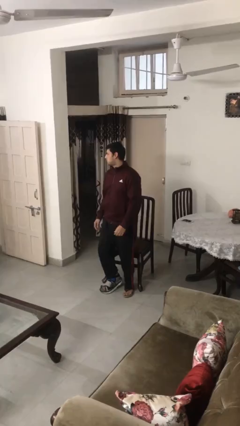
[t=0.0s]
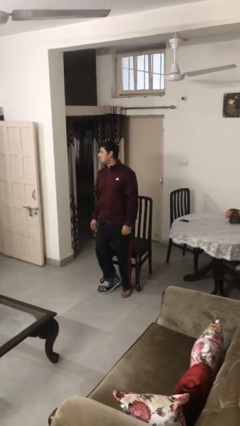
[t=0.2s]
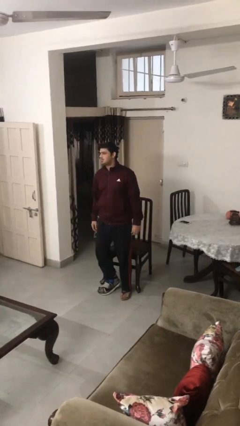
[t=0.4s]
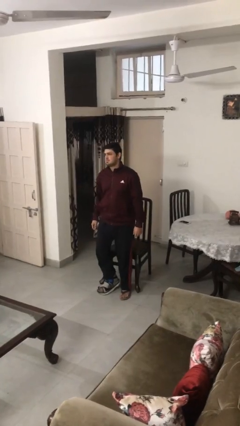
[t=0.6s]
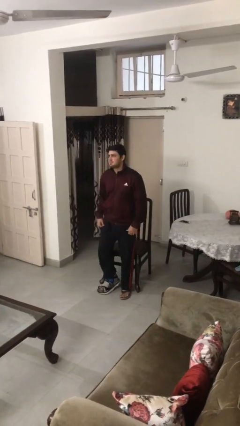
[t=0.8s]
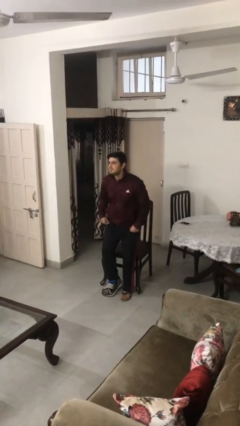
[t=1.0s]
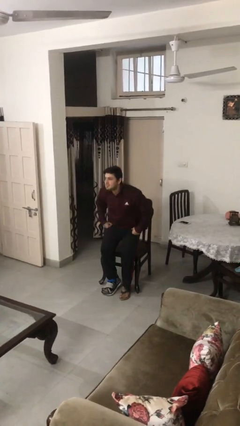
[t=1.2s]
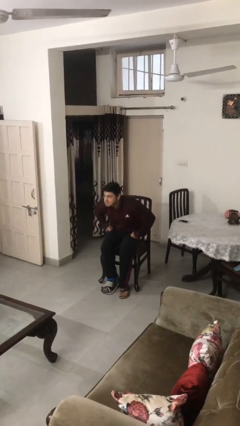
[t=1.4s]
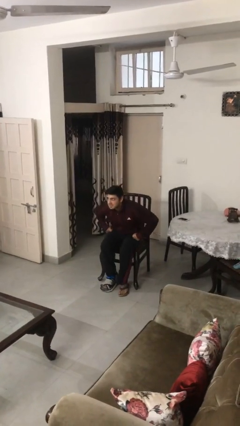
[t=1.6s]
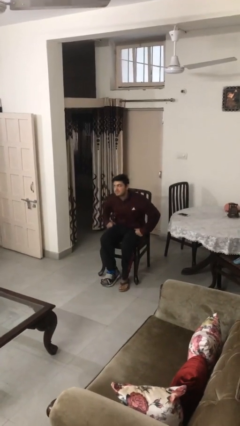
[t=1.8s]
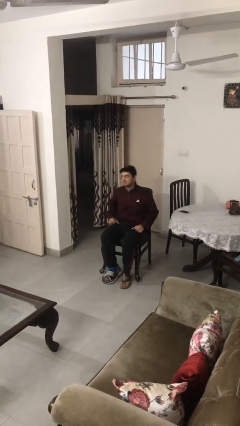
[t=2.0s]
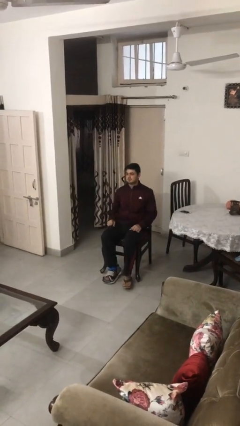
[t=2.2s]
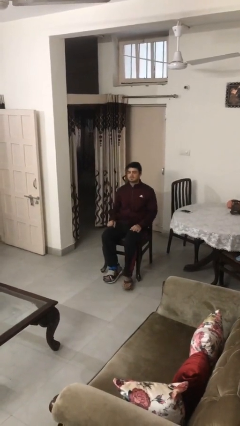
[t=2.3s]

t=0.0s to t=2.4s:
person sits down

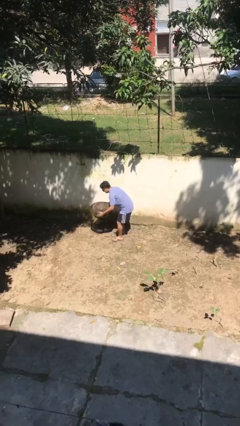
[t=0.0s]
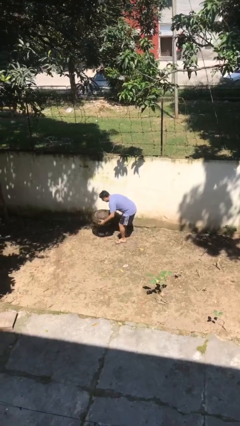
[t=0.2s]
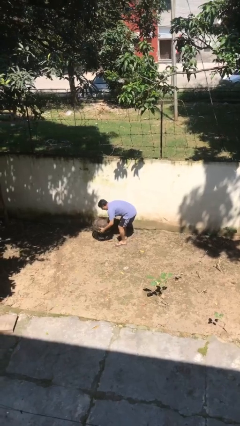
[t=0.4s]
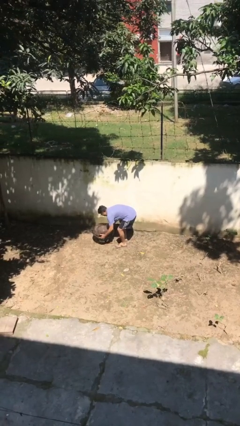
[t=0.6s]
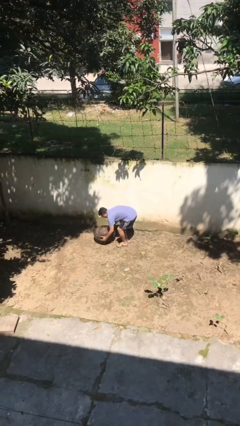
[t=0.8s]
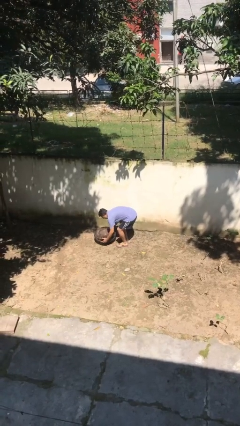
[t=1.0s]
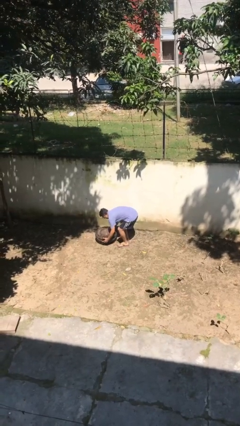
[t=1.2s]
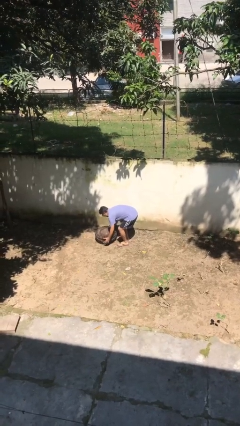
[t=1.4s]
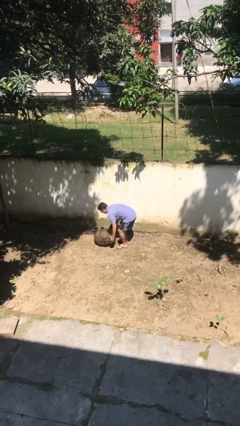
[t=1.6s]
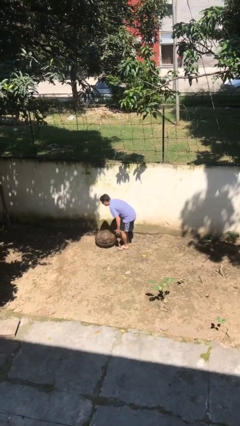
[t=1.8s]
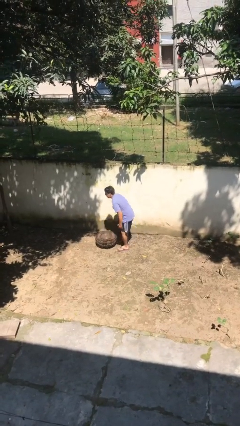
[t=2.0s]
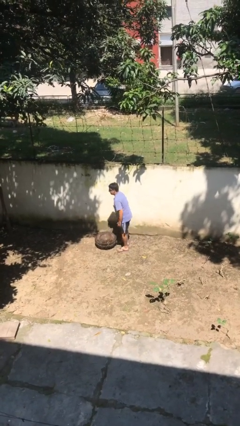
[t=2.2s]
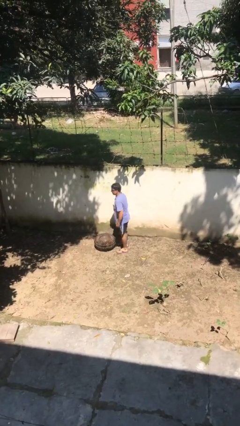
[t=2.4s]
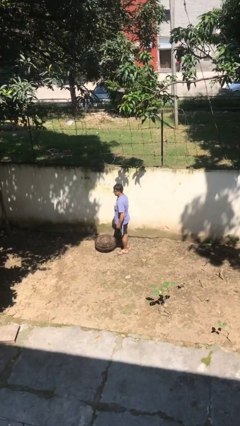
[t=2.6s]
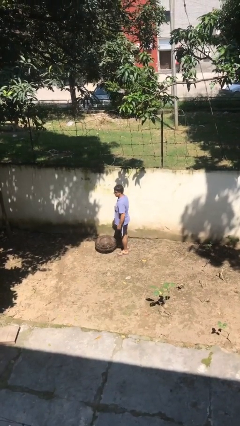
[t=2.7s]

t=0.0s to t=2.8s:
person puts down object on floor

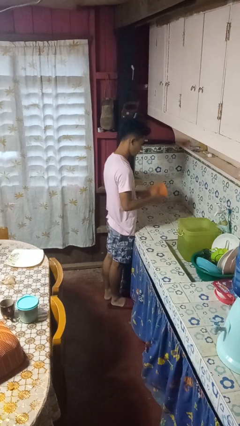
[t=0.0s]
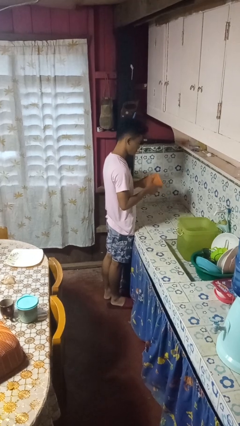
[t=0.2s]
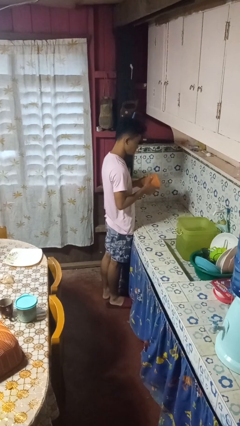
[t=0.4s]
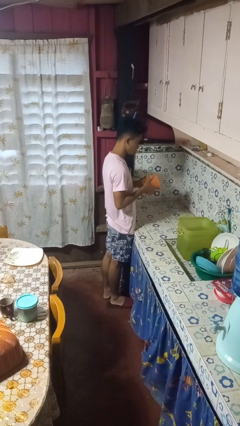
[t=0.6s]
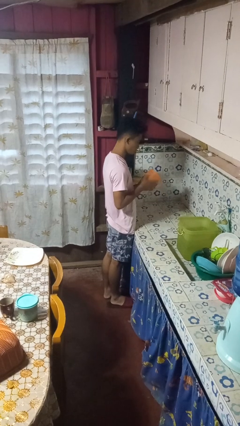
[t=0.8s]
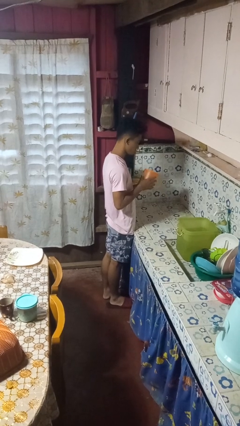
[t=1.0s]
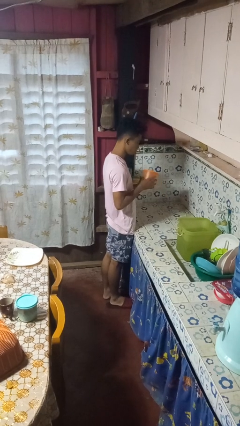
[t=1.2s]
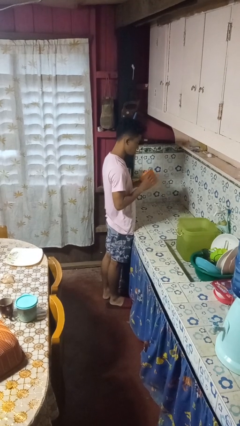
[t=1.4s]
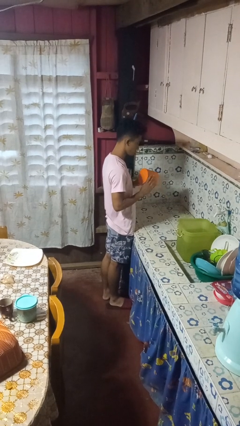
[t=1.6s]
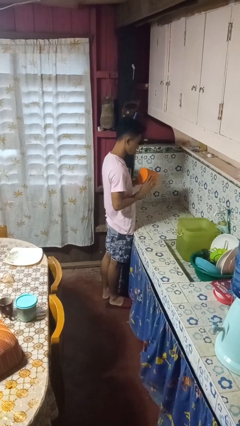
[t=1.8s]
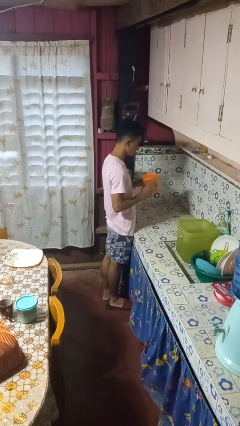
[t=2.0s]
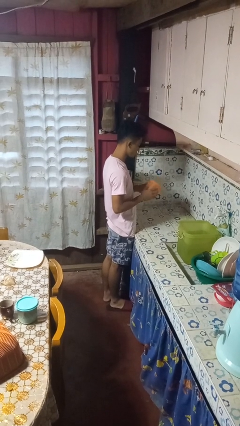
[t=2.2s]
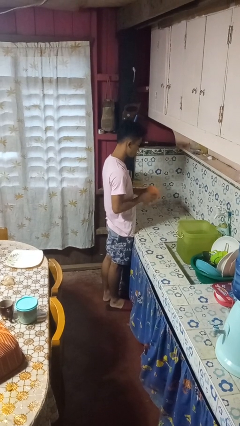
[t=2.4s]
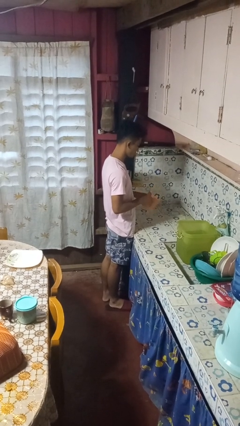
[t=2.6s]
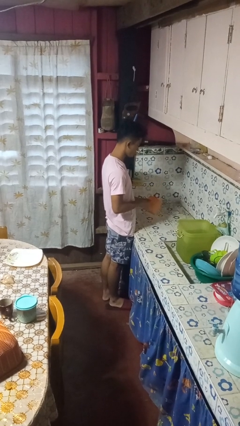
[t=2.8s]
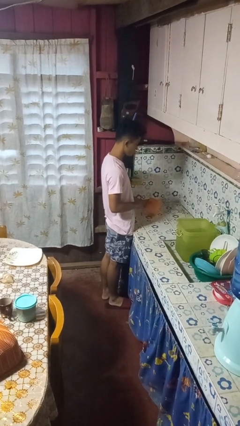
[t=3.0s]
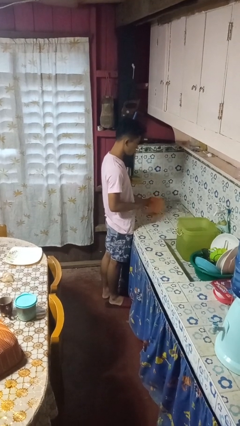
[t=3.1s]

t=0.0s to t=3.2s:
person picks up object from countertop

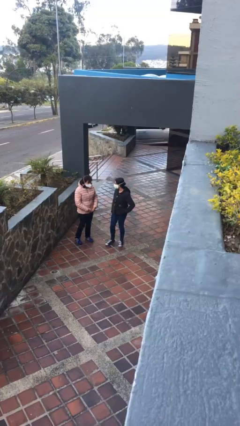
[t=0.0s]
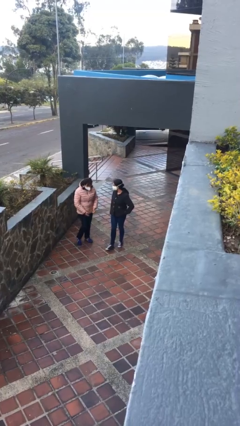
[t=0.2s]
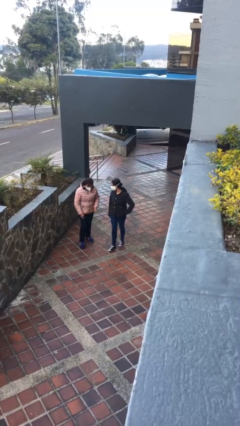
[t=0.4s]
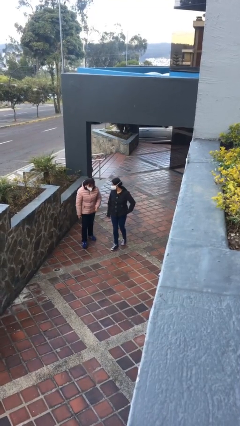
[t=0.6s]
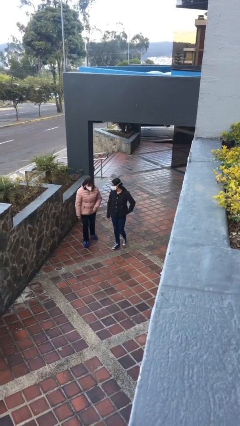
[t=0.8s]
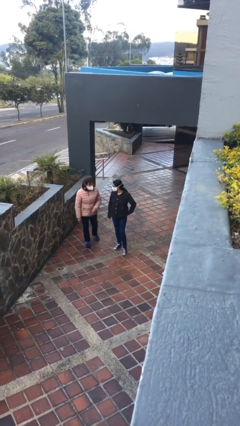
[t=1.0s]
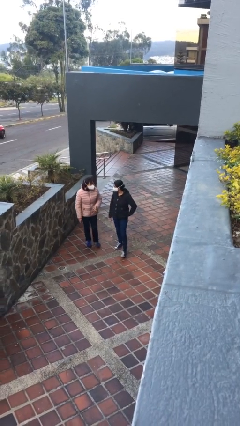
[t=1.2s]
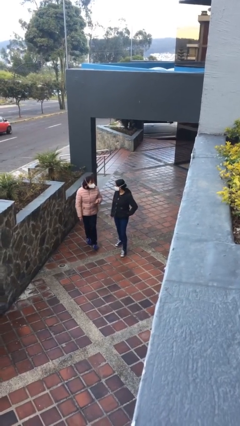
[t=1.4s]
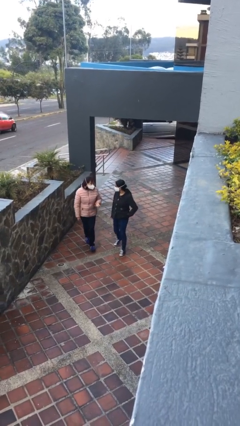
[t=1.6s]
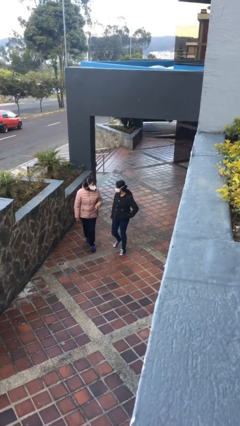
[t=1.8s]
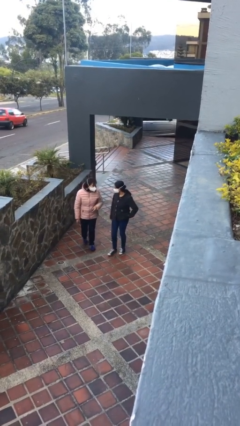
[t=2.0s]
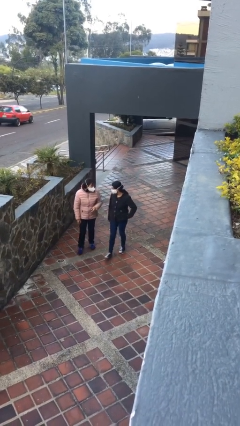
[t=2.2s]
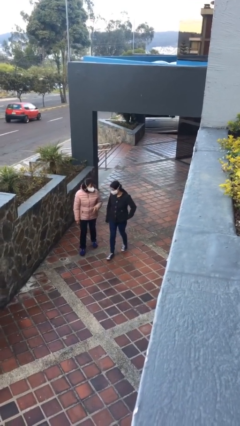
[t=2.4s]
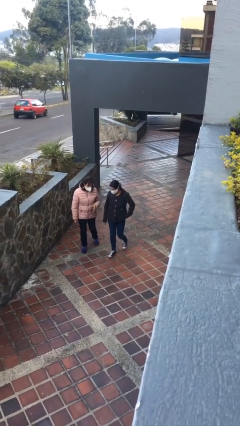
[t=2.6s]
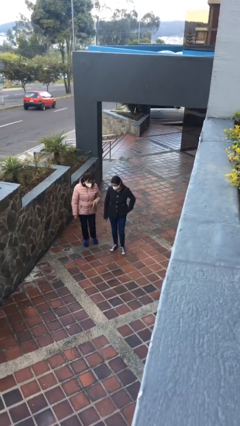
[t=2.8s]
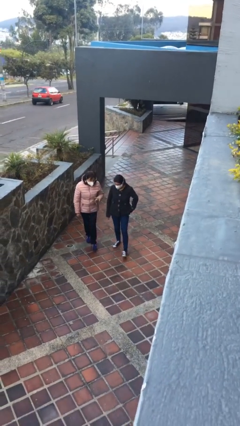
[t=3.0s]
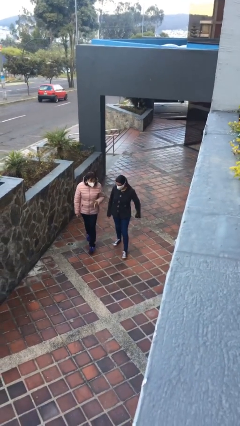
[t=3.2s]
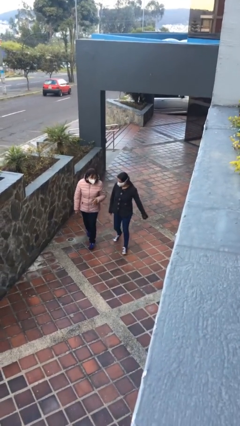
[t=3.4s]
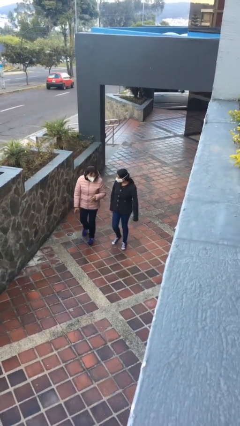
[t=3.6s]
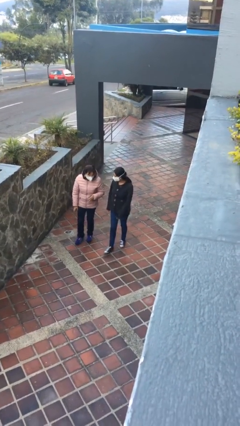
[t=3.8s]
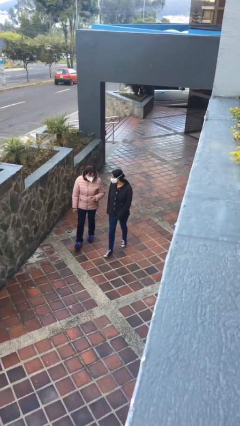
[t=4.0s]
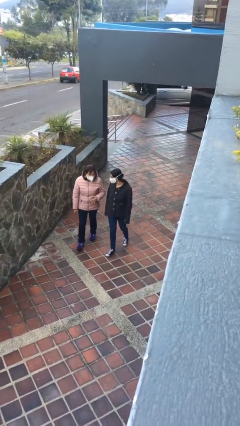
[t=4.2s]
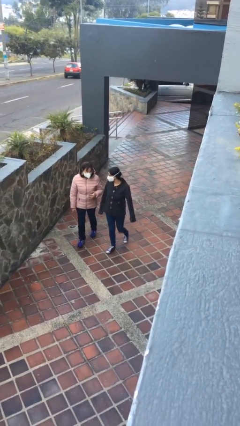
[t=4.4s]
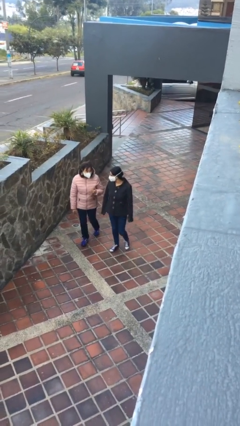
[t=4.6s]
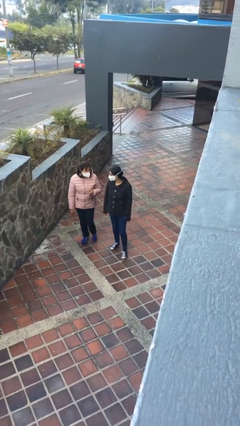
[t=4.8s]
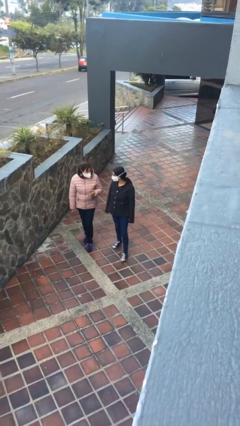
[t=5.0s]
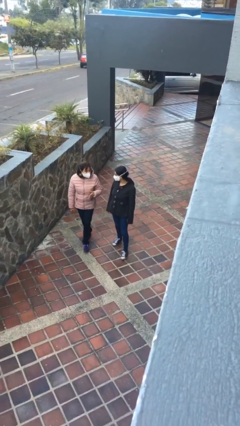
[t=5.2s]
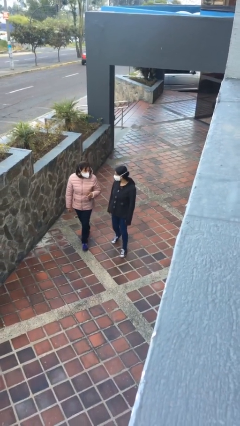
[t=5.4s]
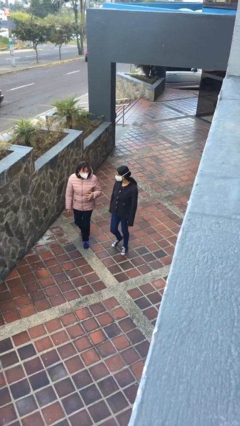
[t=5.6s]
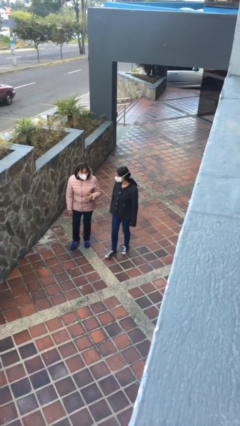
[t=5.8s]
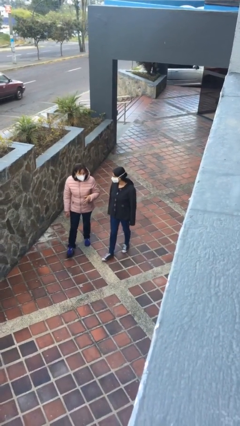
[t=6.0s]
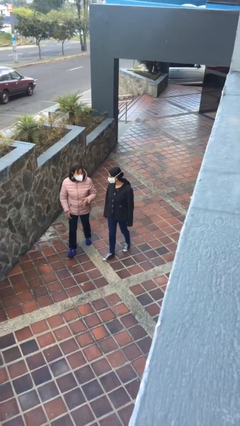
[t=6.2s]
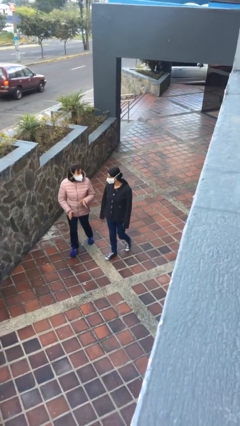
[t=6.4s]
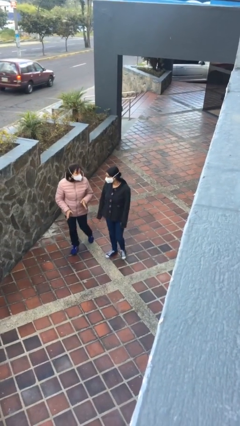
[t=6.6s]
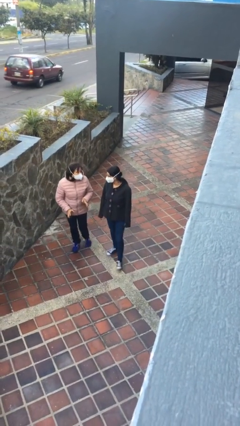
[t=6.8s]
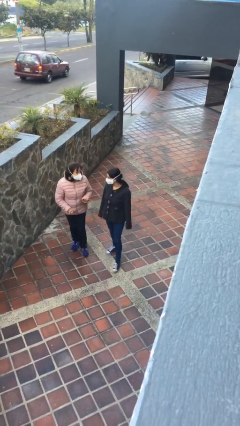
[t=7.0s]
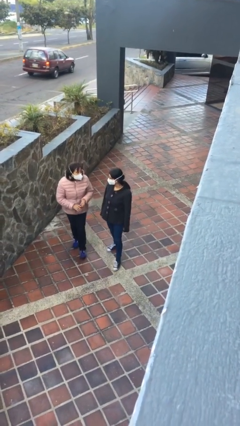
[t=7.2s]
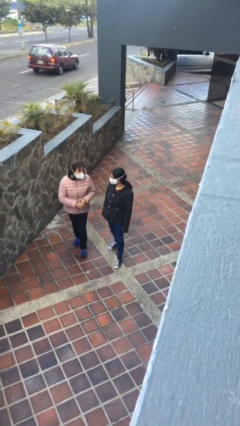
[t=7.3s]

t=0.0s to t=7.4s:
person talks to person

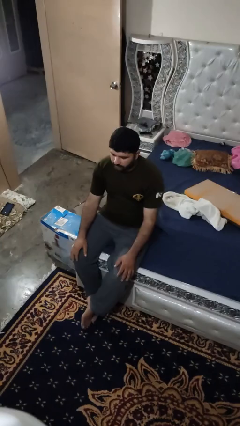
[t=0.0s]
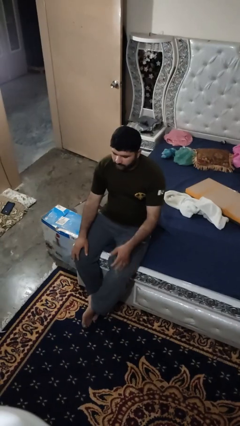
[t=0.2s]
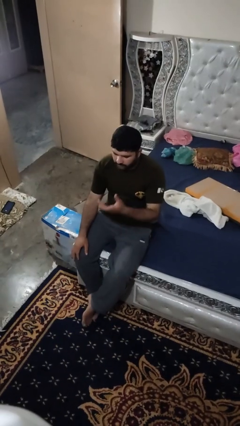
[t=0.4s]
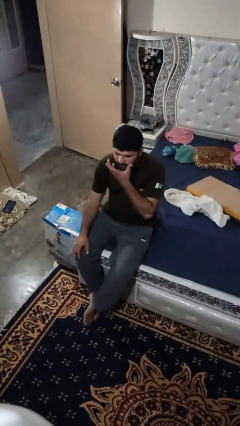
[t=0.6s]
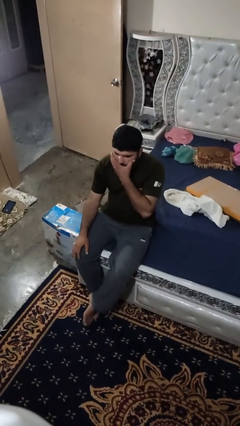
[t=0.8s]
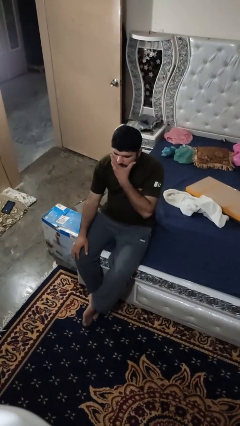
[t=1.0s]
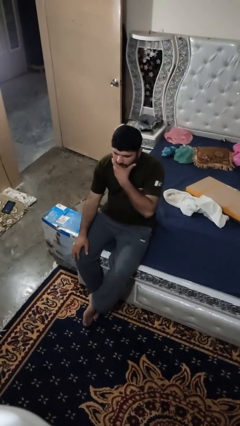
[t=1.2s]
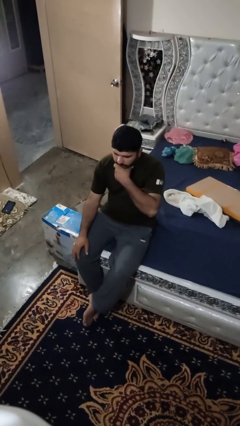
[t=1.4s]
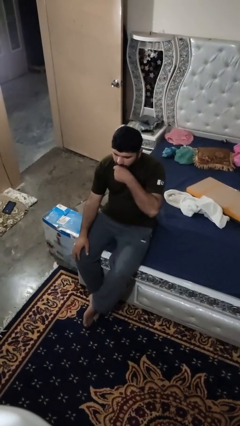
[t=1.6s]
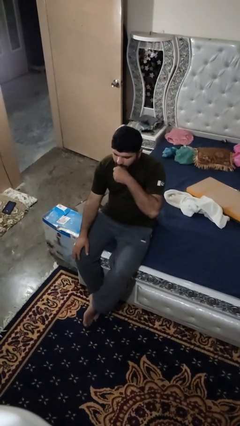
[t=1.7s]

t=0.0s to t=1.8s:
person strokes chin
